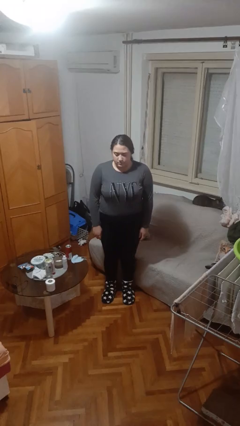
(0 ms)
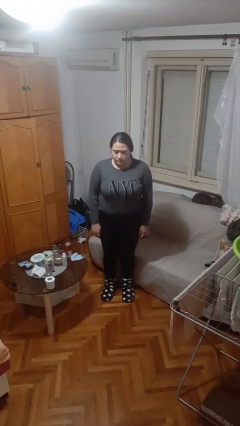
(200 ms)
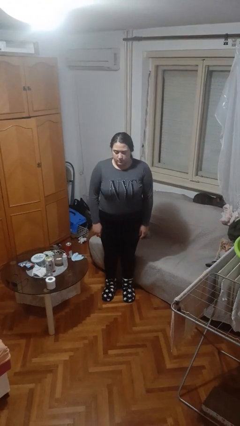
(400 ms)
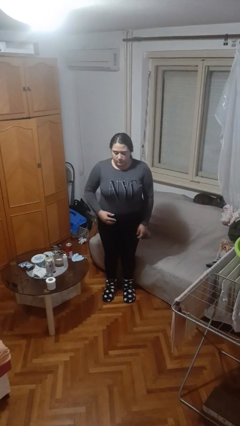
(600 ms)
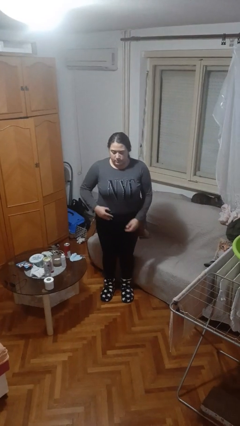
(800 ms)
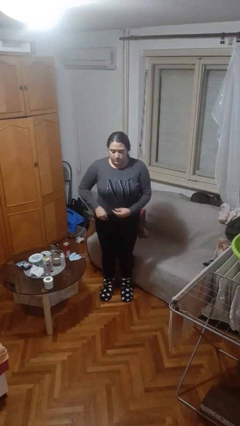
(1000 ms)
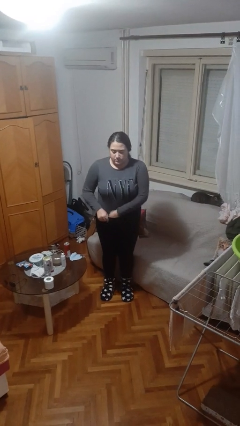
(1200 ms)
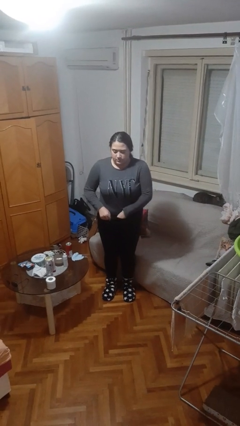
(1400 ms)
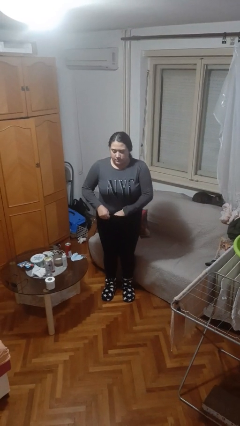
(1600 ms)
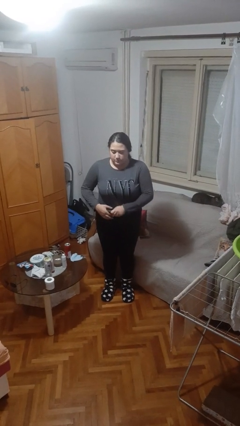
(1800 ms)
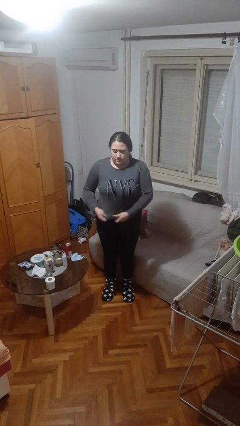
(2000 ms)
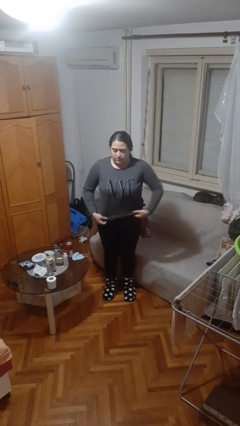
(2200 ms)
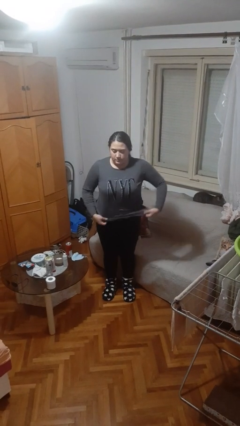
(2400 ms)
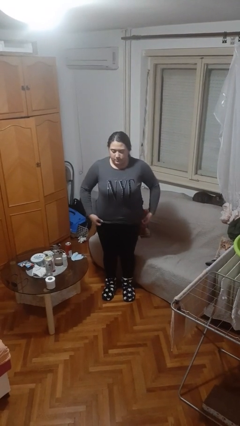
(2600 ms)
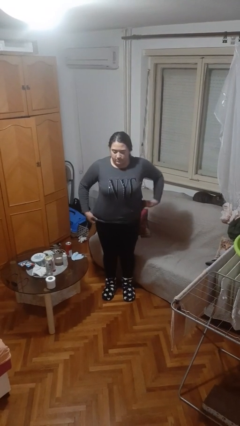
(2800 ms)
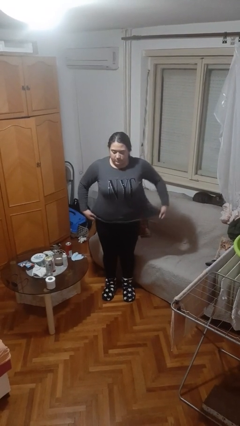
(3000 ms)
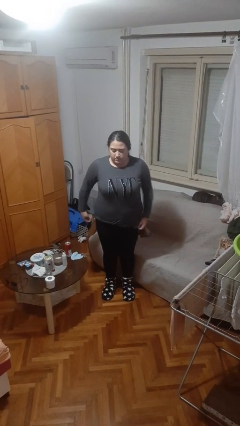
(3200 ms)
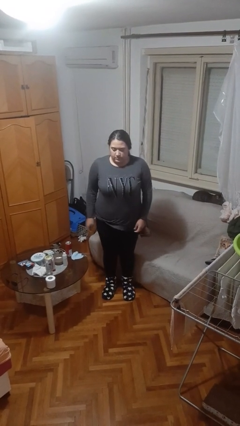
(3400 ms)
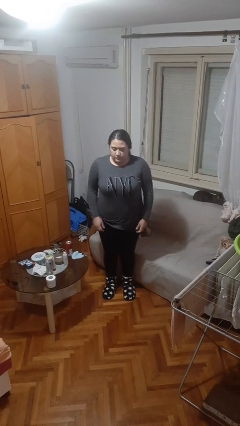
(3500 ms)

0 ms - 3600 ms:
person untucks shirt

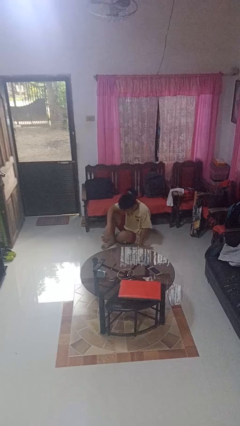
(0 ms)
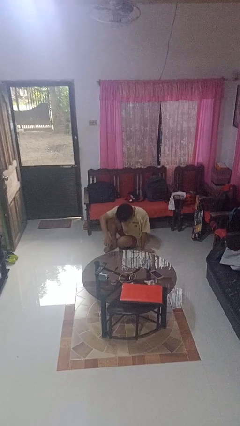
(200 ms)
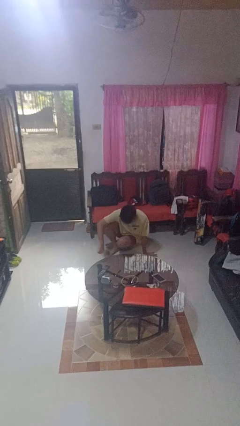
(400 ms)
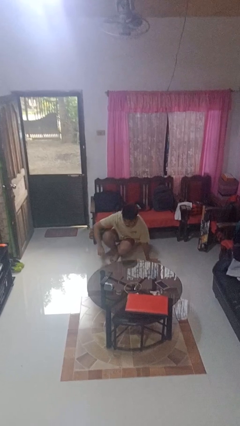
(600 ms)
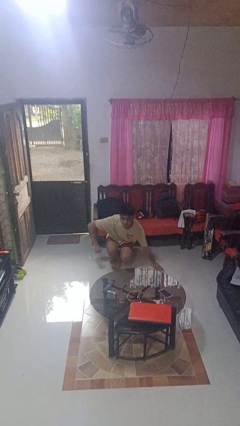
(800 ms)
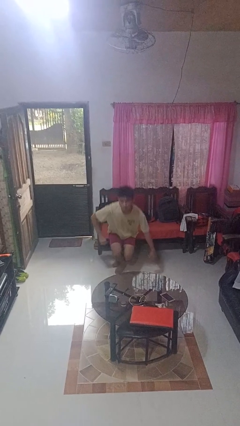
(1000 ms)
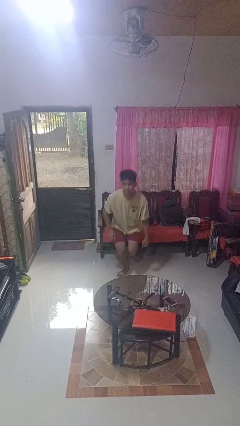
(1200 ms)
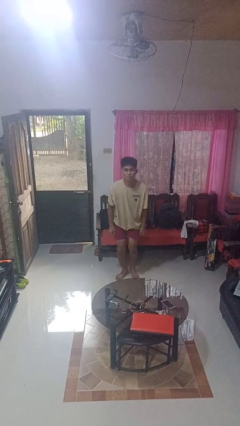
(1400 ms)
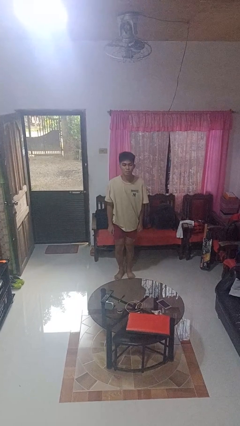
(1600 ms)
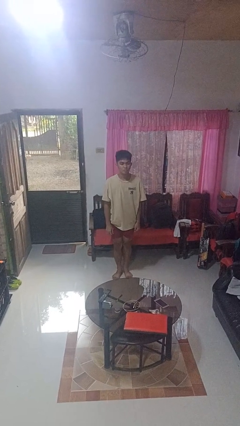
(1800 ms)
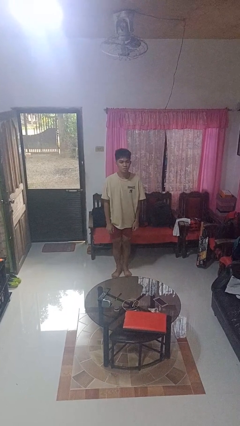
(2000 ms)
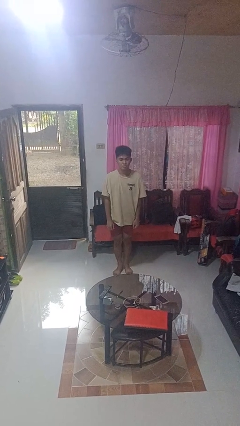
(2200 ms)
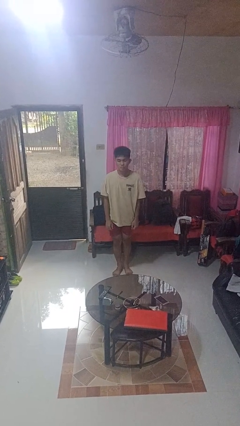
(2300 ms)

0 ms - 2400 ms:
person stands up from floor

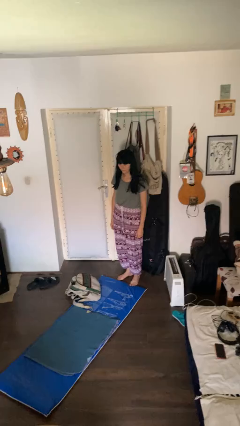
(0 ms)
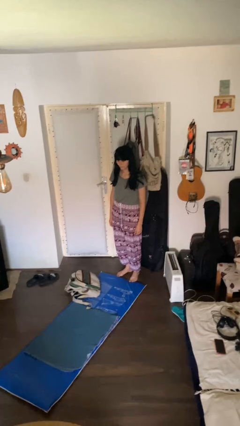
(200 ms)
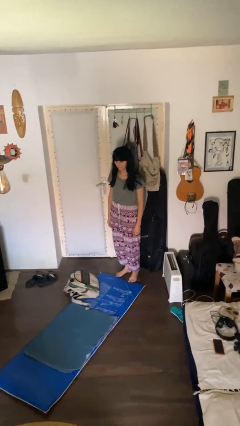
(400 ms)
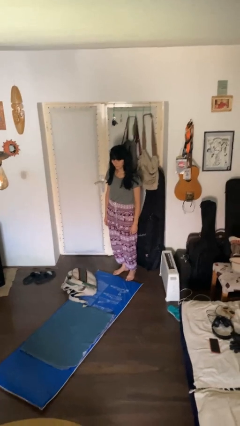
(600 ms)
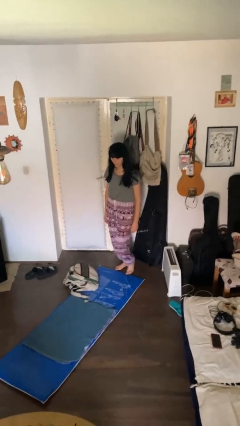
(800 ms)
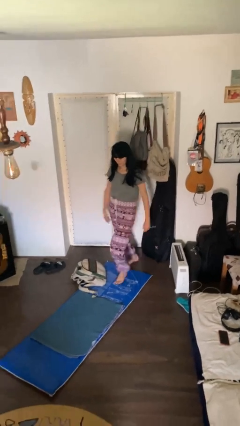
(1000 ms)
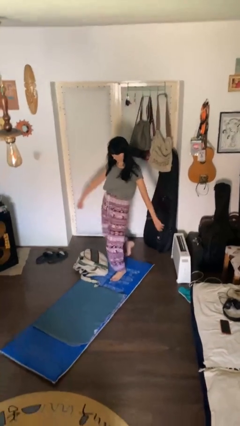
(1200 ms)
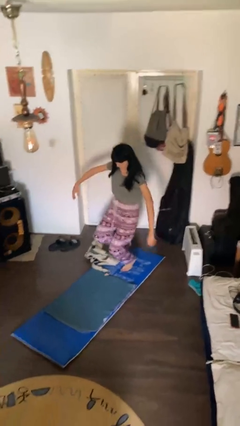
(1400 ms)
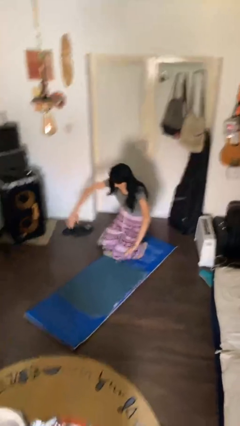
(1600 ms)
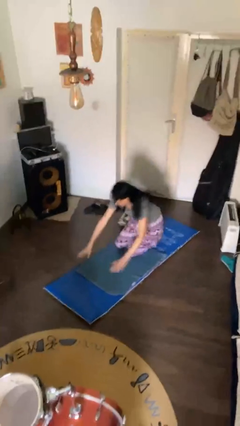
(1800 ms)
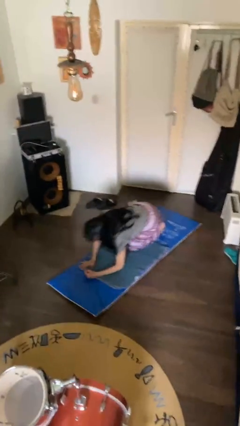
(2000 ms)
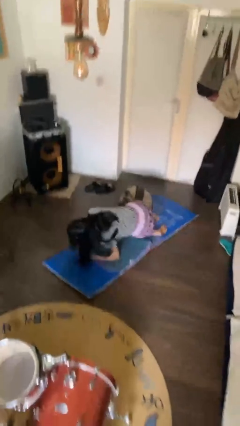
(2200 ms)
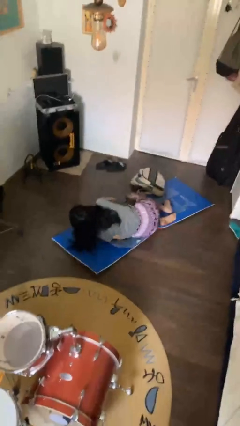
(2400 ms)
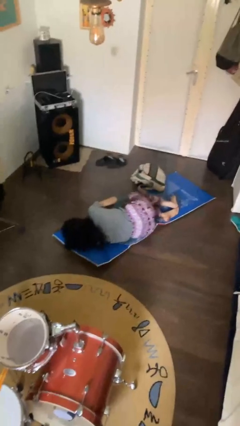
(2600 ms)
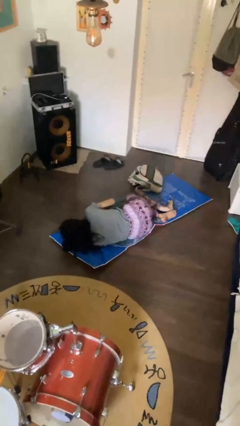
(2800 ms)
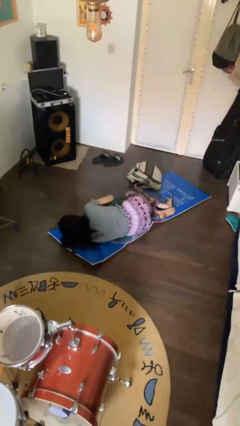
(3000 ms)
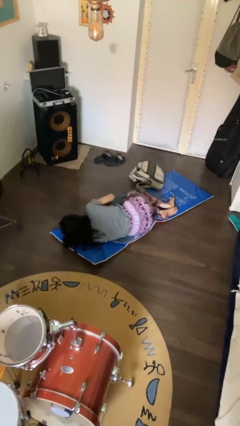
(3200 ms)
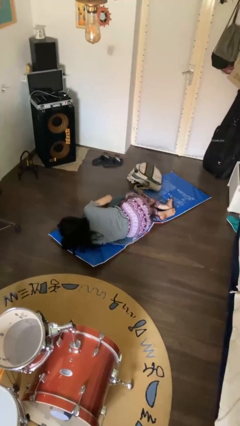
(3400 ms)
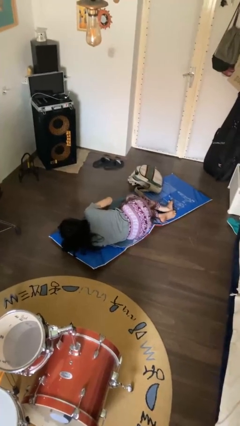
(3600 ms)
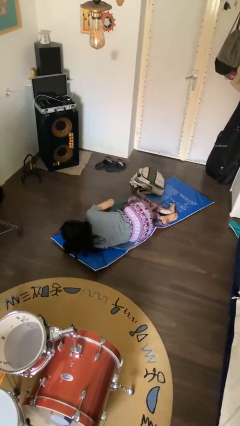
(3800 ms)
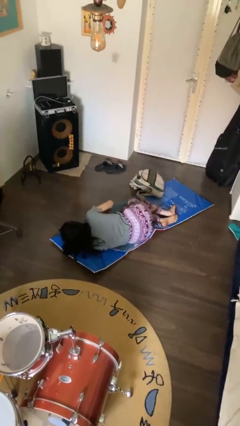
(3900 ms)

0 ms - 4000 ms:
person trips on object on floor

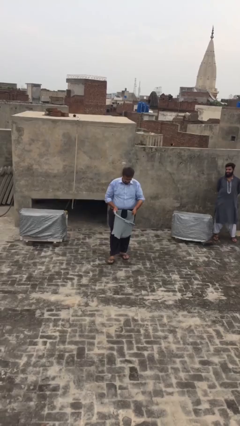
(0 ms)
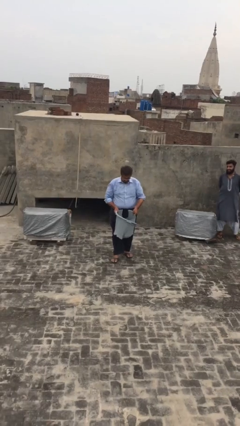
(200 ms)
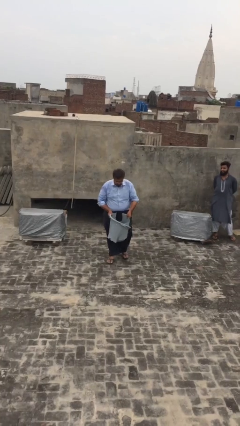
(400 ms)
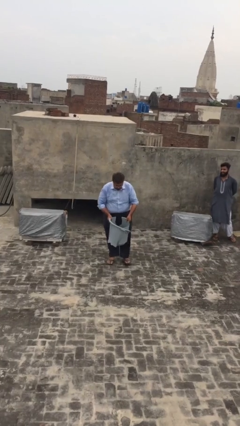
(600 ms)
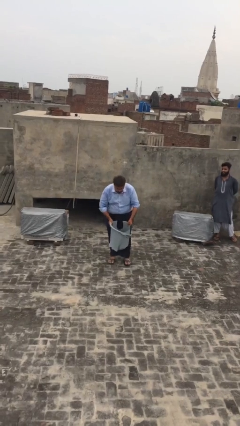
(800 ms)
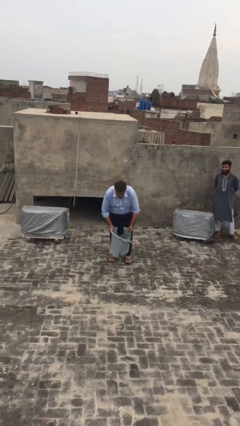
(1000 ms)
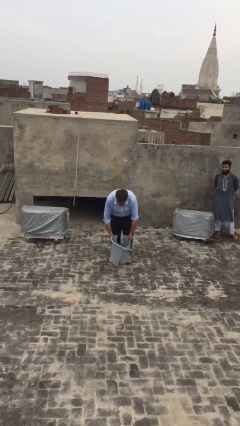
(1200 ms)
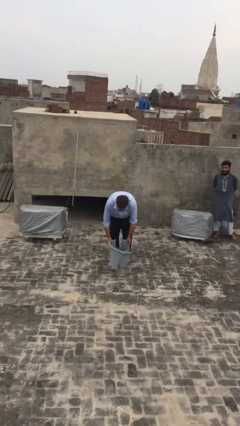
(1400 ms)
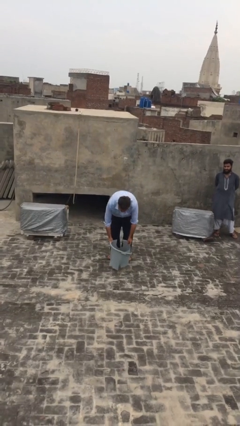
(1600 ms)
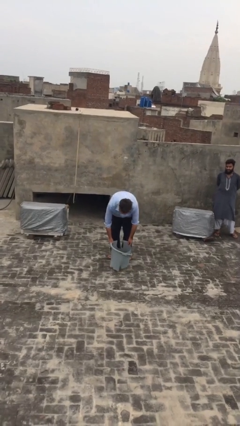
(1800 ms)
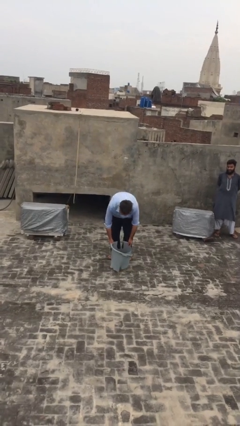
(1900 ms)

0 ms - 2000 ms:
person puts down object on floor

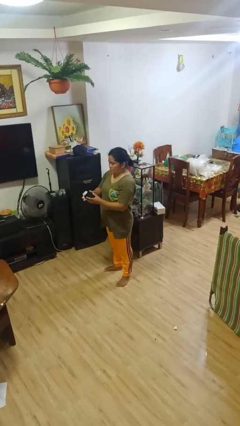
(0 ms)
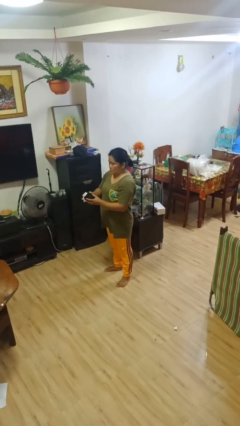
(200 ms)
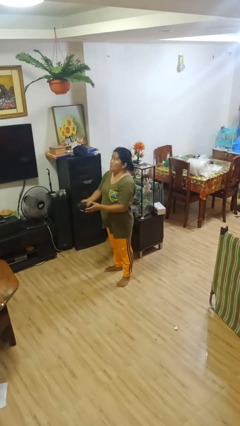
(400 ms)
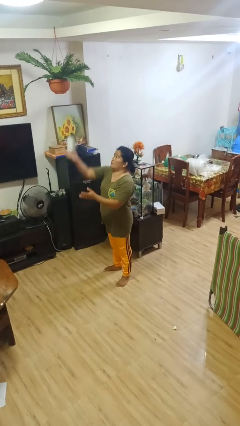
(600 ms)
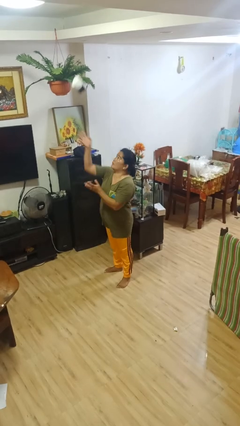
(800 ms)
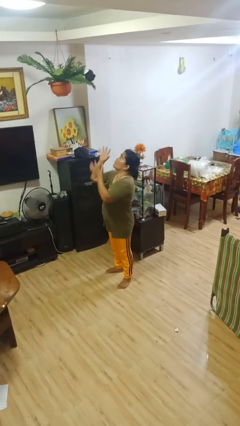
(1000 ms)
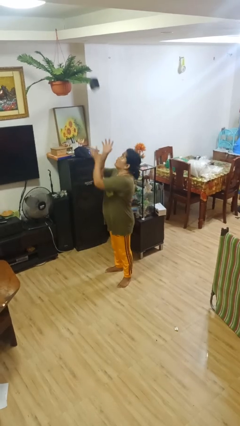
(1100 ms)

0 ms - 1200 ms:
person drops object

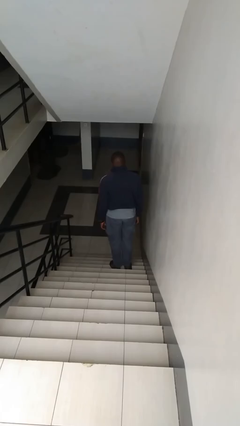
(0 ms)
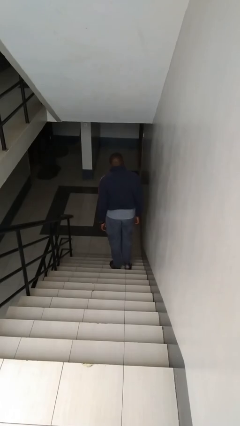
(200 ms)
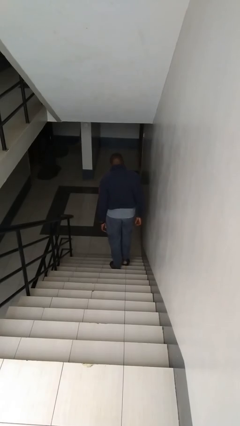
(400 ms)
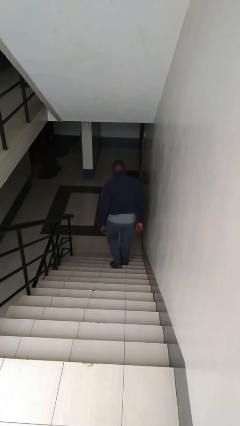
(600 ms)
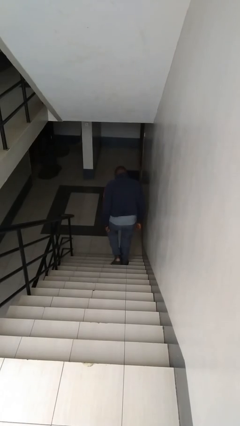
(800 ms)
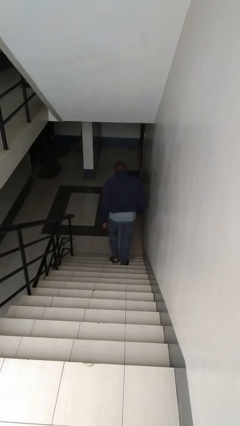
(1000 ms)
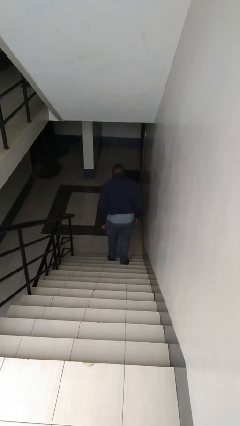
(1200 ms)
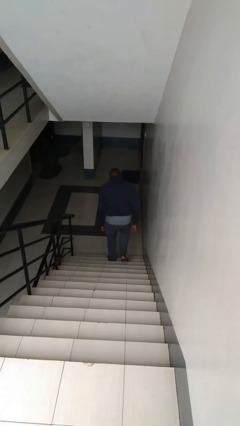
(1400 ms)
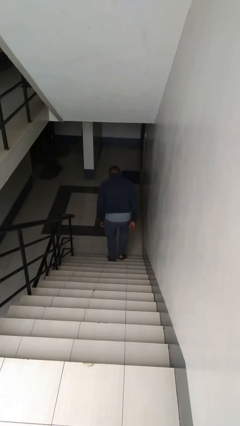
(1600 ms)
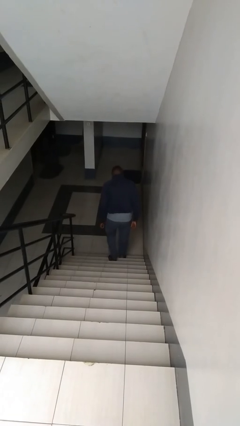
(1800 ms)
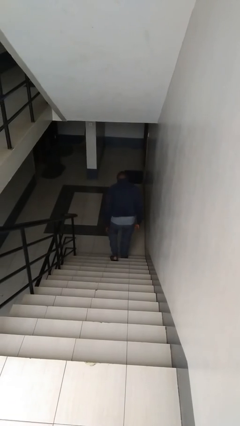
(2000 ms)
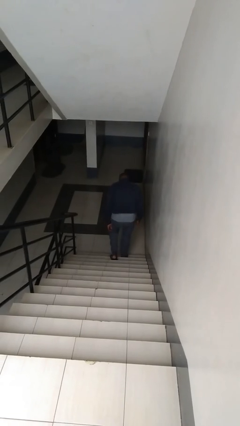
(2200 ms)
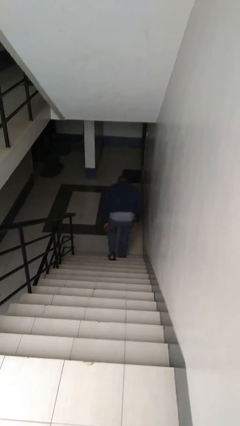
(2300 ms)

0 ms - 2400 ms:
person climbs down stairs

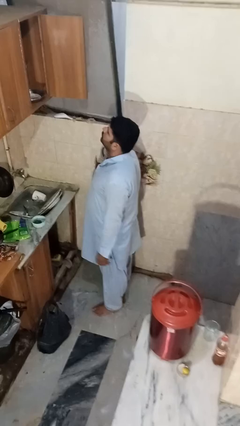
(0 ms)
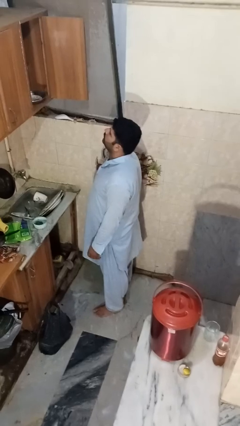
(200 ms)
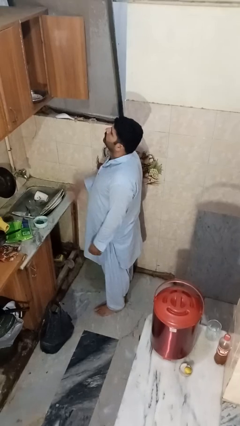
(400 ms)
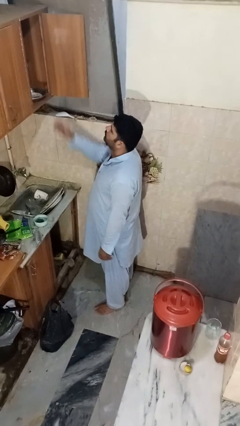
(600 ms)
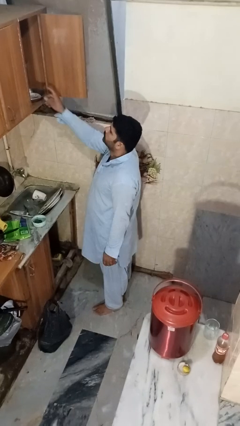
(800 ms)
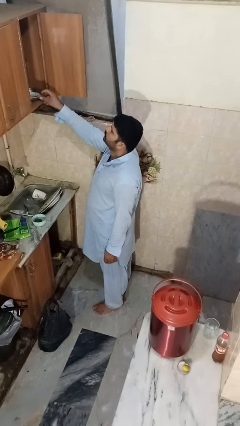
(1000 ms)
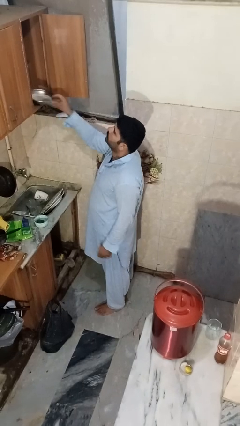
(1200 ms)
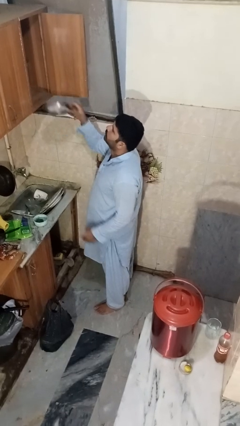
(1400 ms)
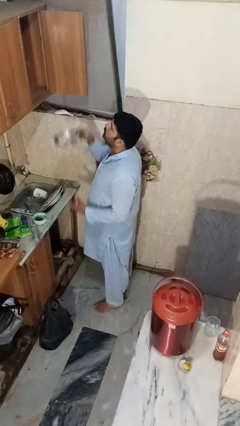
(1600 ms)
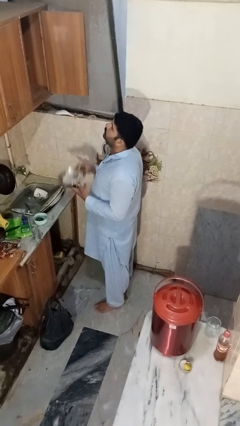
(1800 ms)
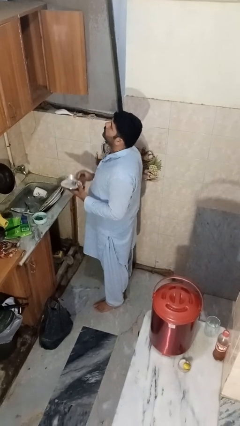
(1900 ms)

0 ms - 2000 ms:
person takes object from cabinet
